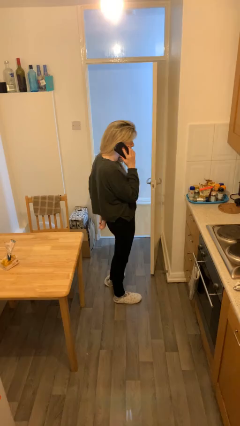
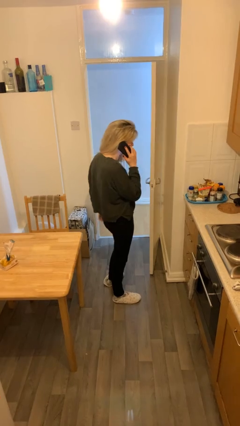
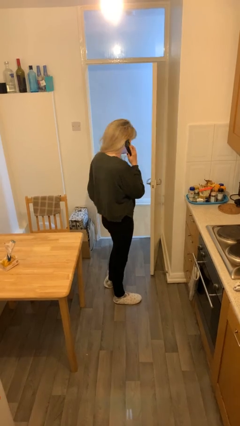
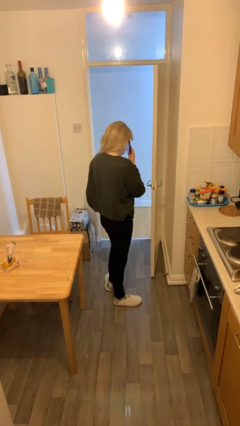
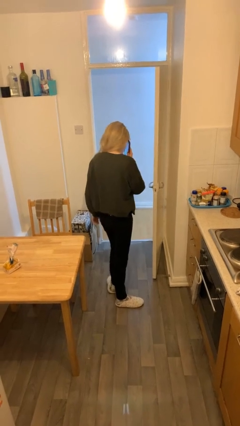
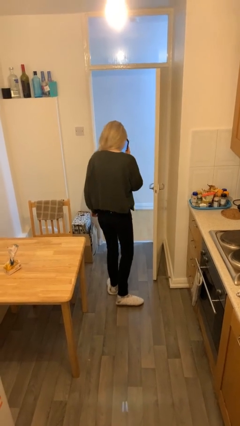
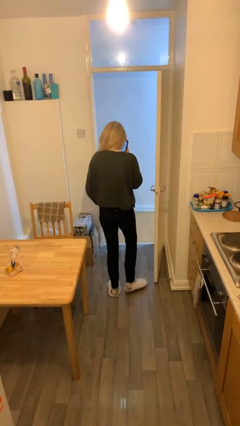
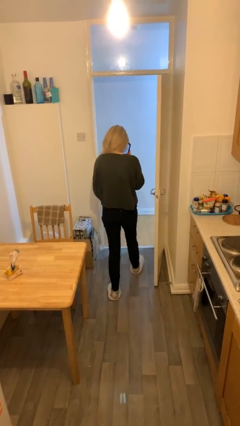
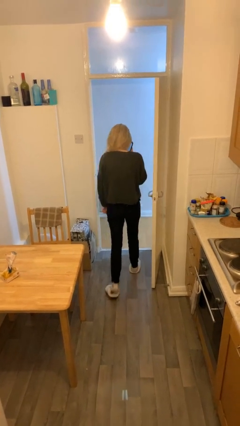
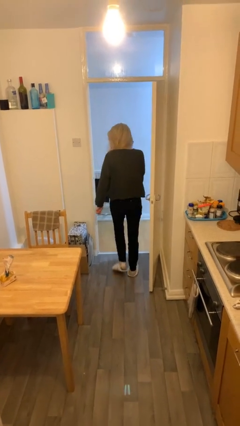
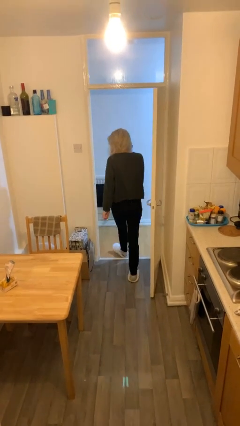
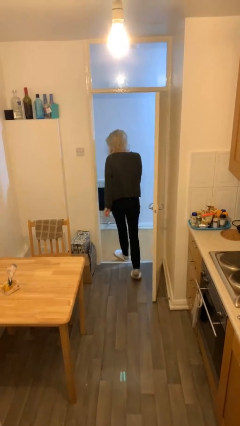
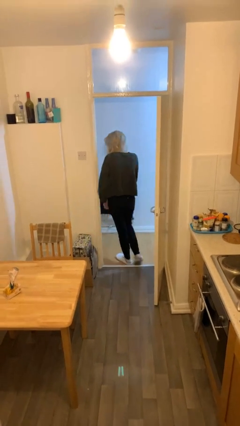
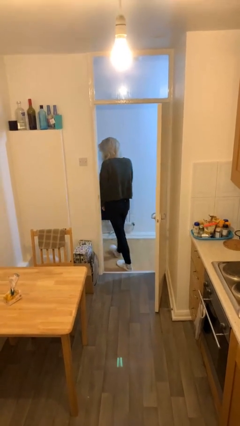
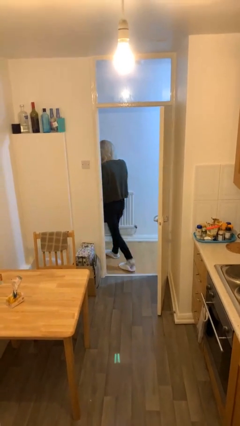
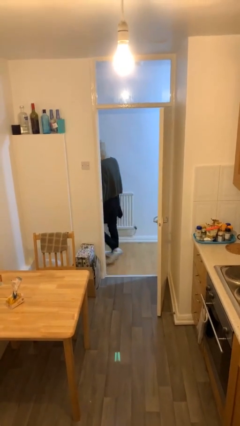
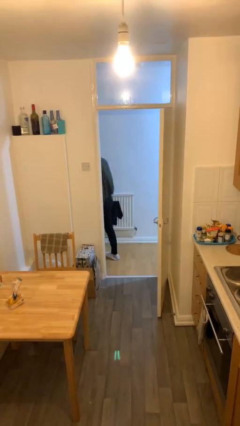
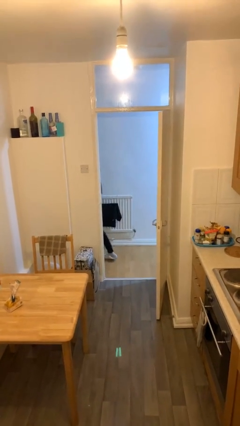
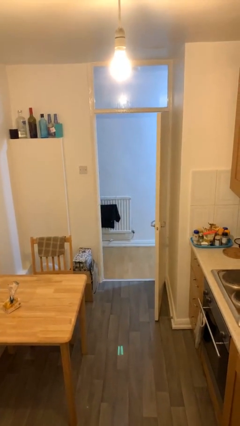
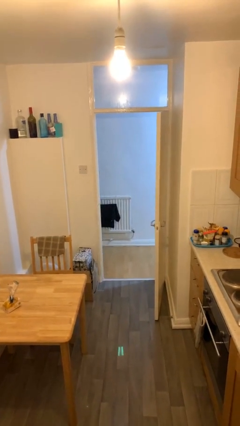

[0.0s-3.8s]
person exits scene through structure

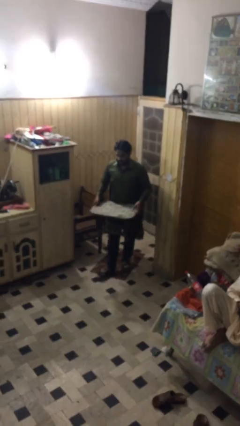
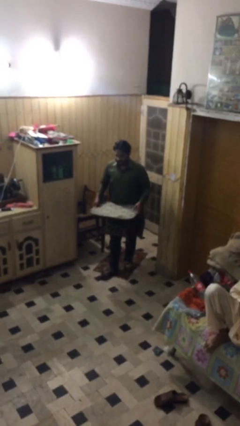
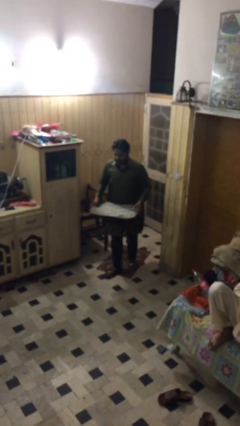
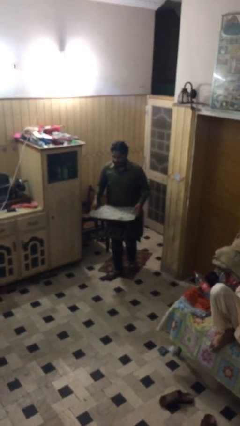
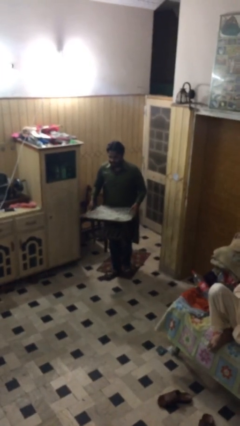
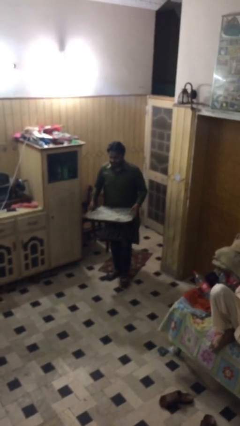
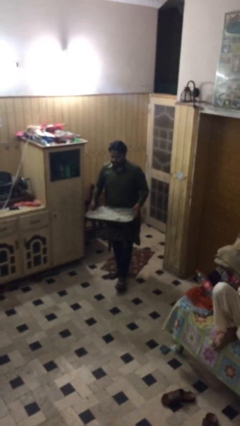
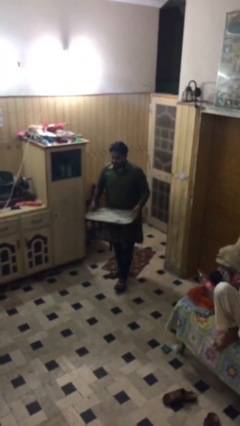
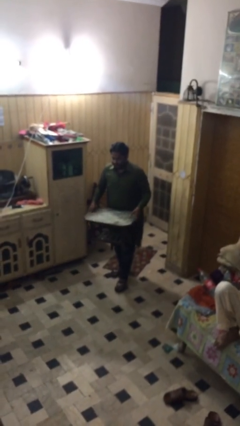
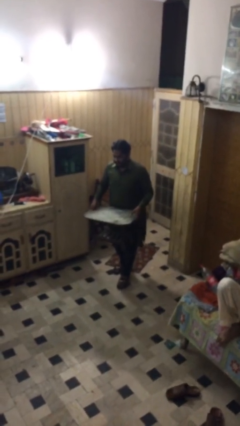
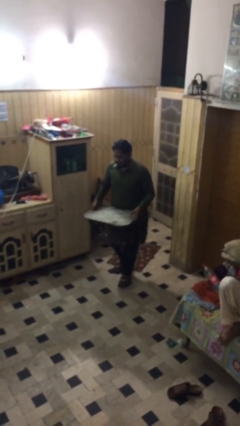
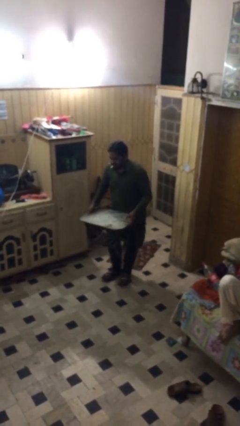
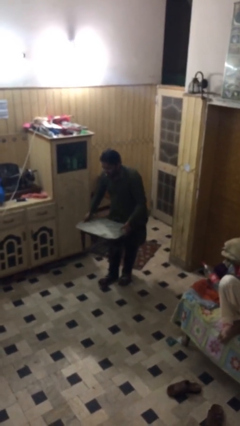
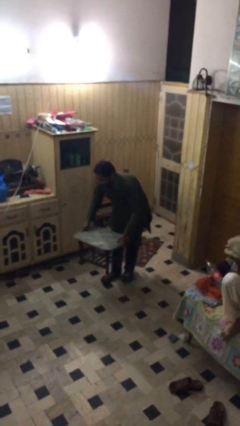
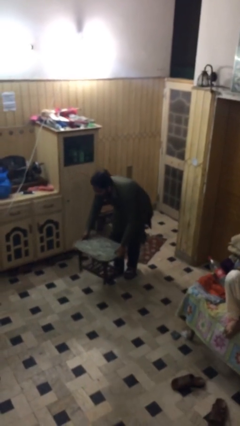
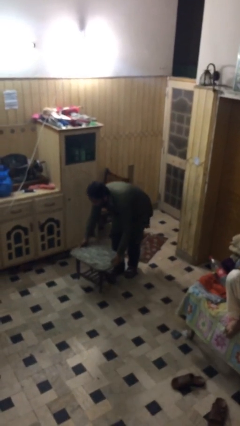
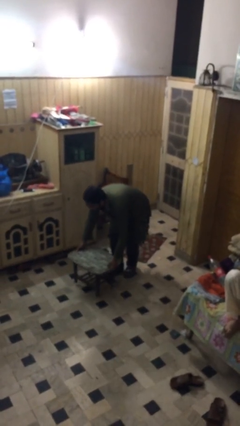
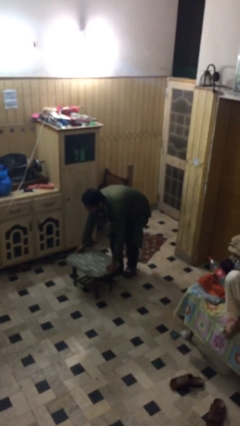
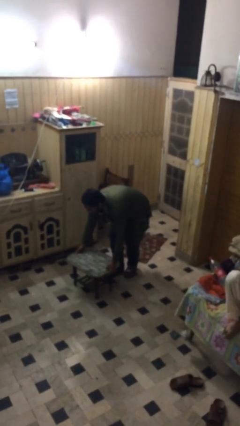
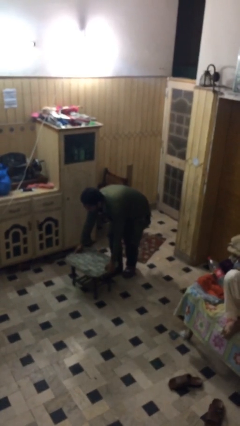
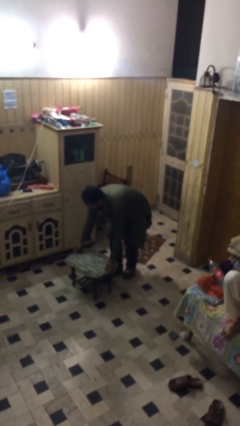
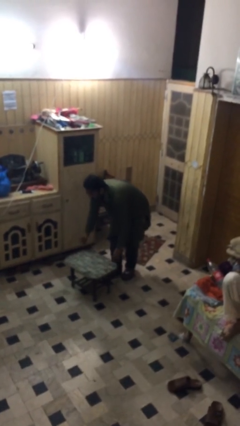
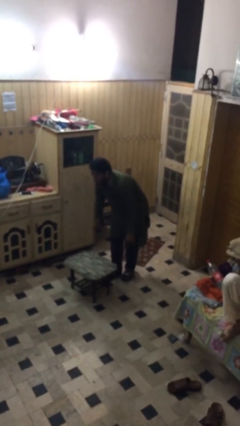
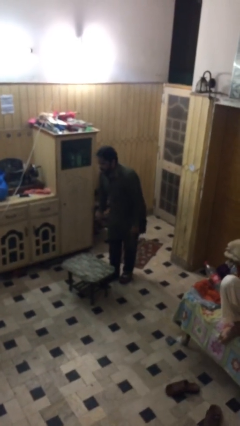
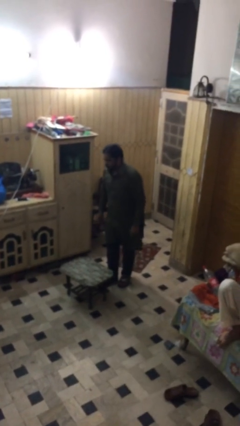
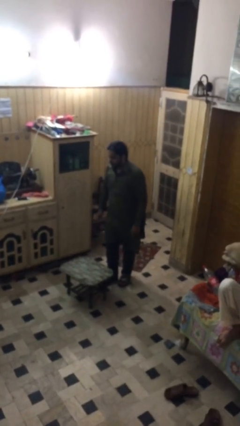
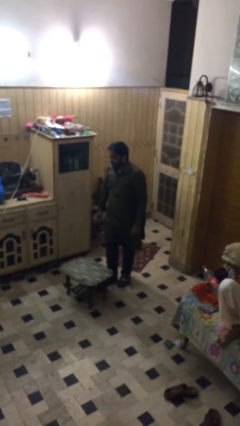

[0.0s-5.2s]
person puts down object on floor

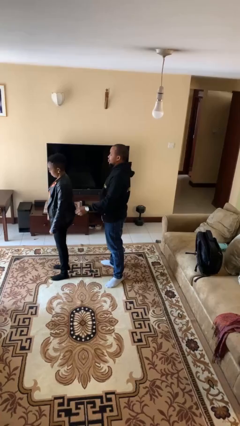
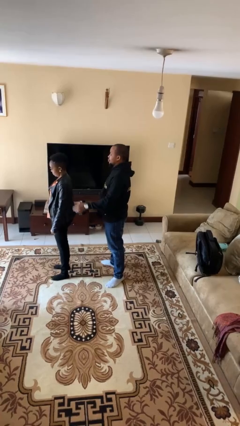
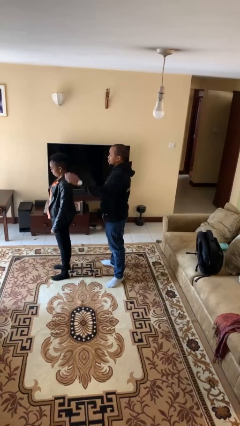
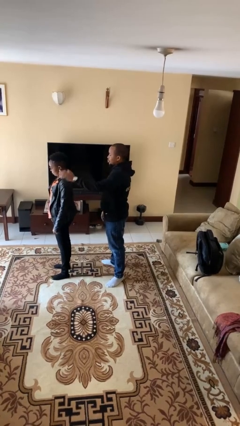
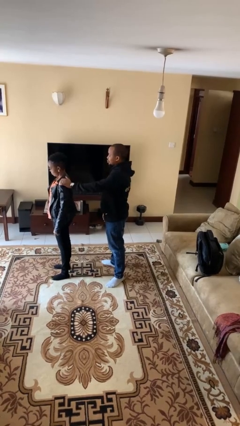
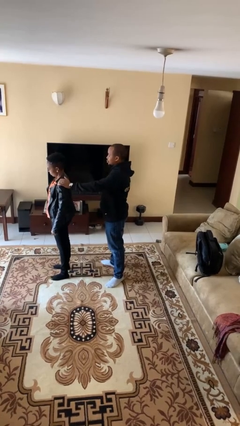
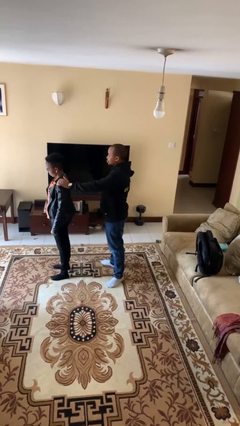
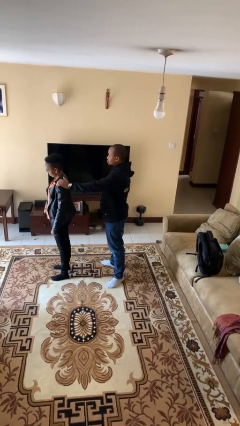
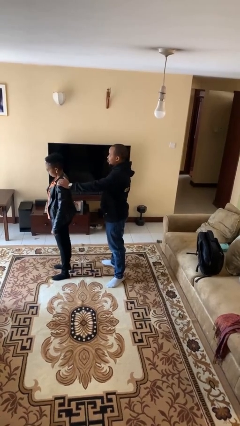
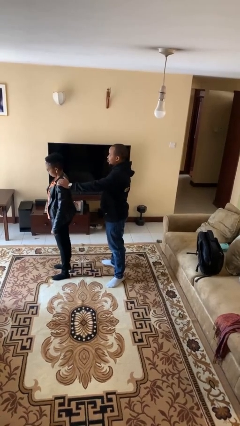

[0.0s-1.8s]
person grabs person by shoulder

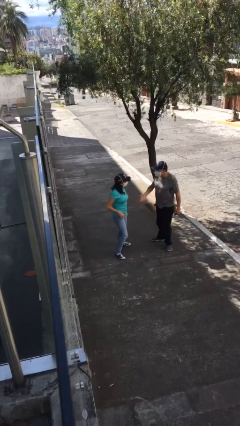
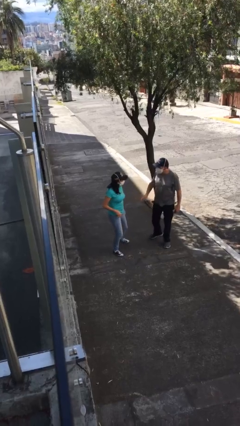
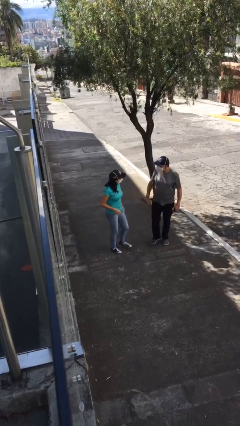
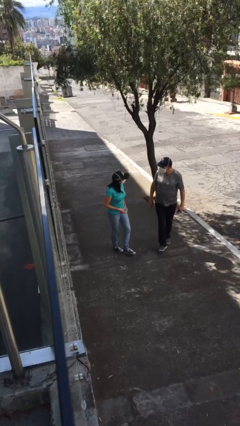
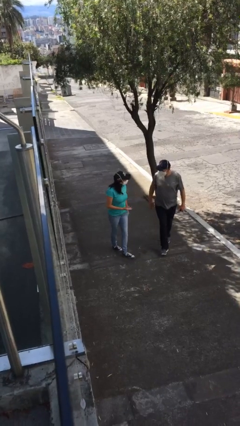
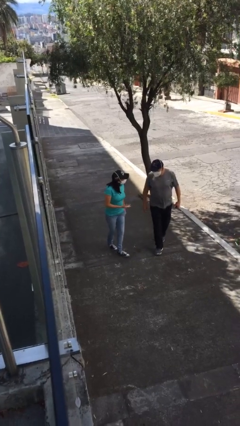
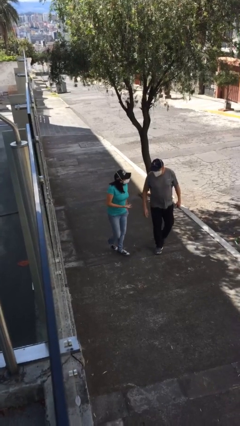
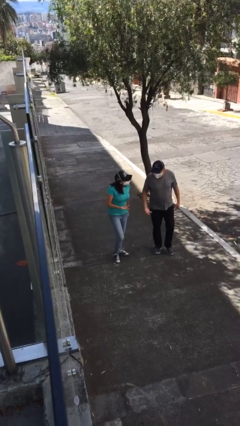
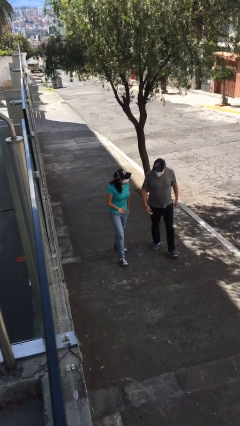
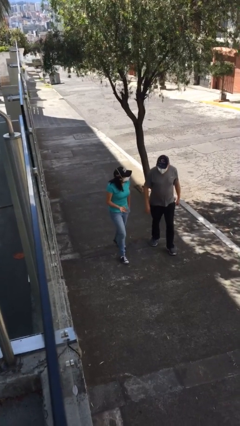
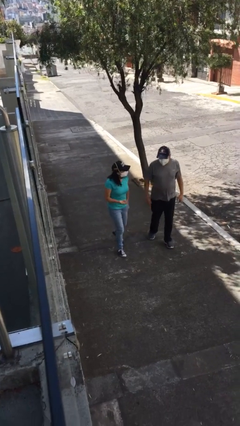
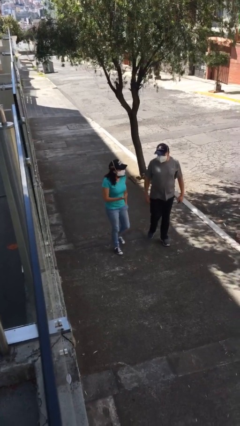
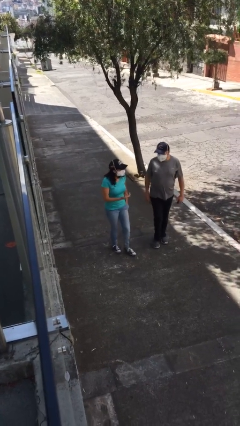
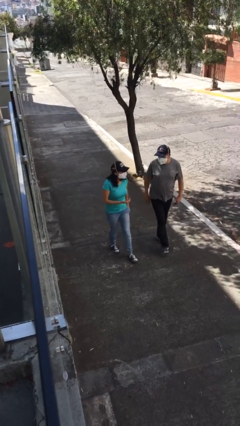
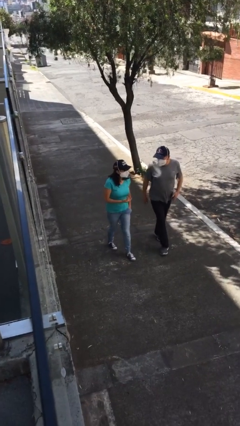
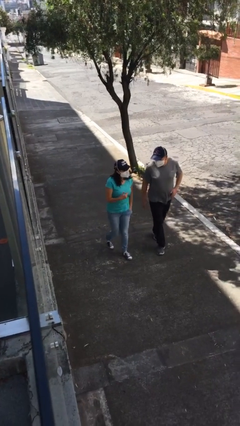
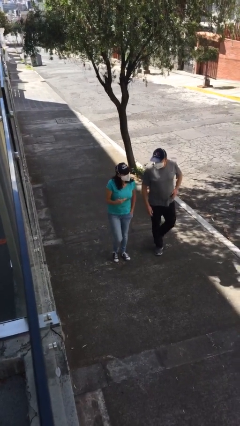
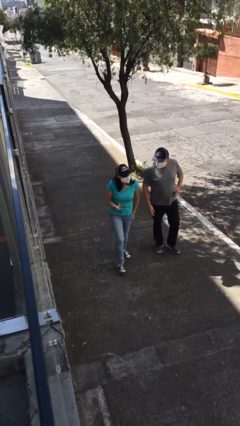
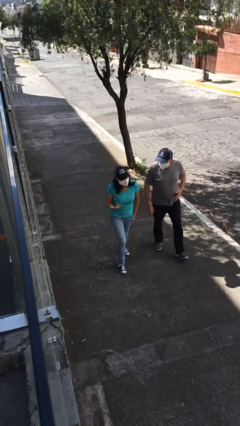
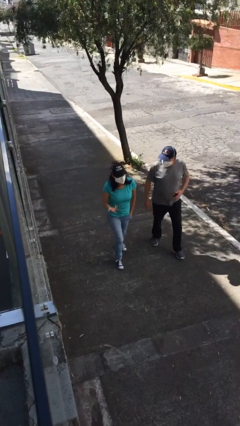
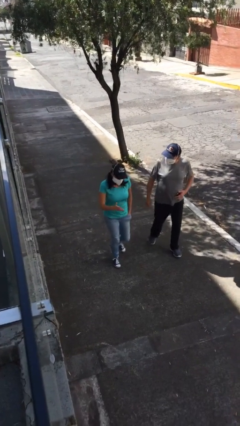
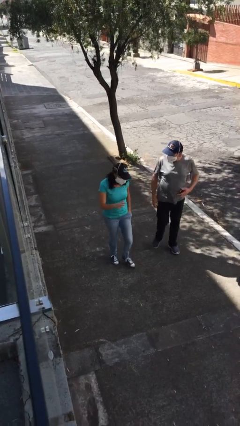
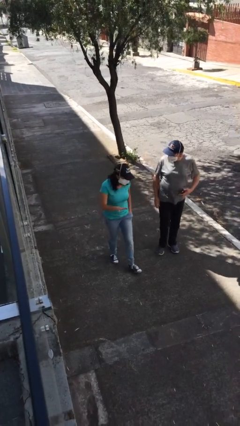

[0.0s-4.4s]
person talks to person

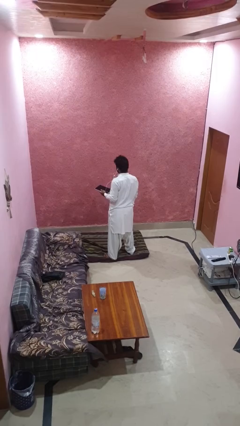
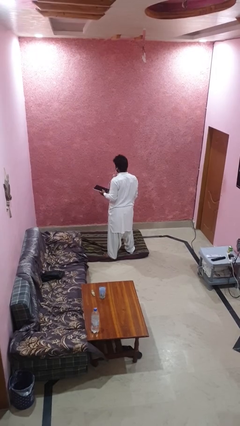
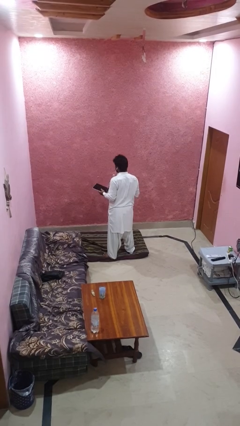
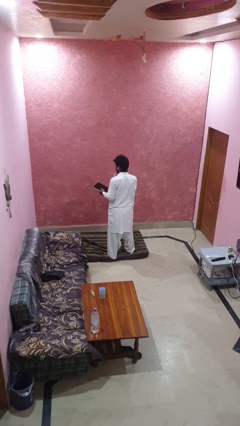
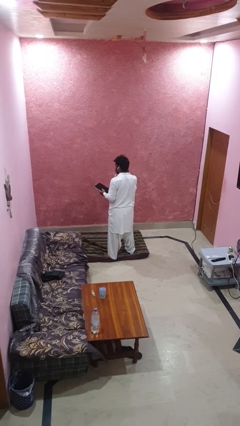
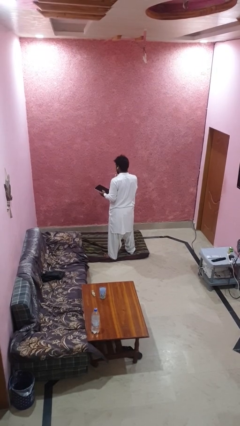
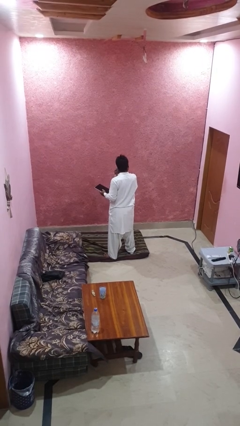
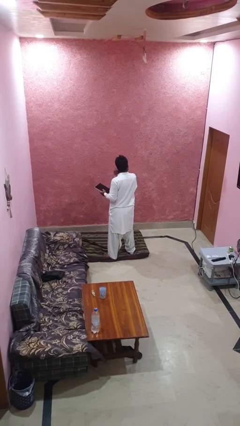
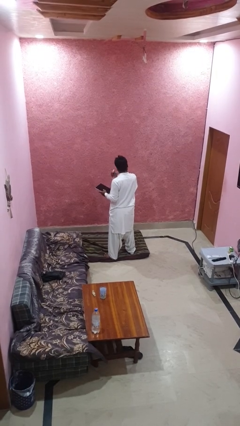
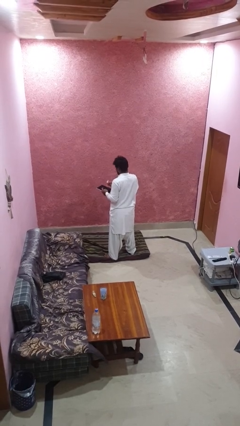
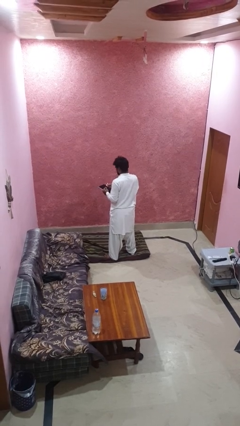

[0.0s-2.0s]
person takes off headphones

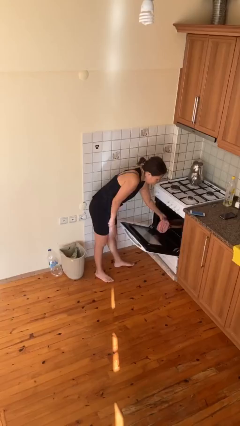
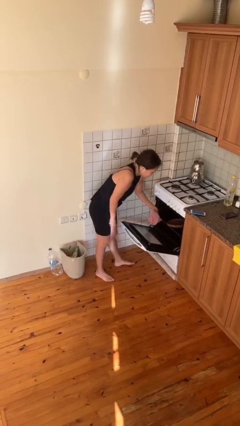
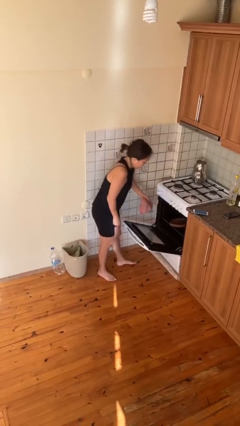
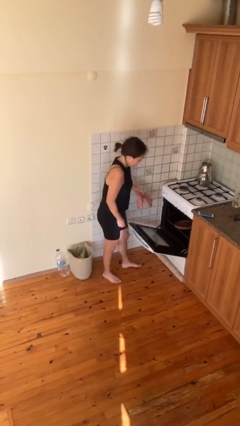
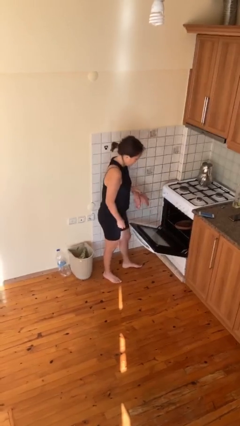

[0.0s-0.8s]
person puts object into oven
